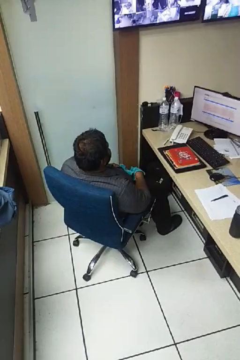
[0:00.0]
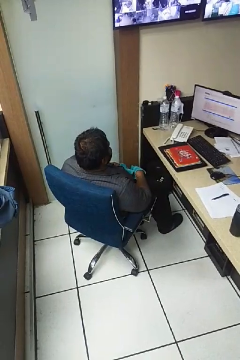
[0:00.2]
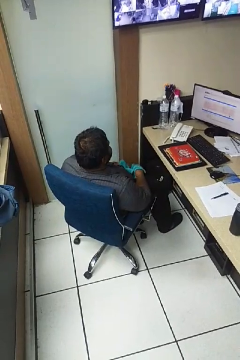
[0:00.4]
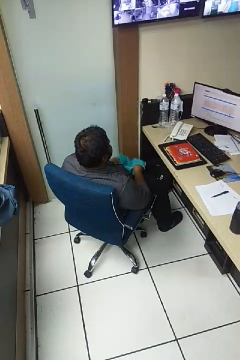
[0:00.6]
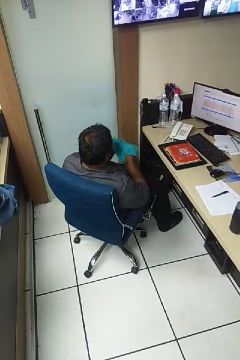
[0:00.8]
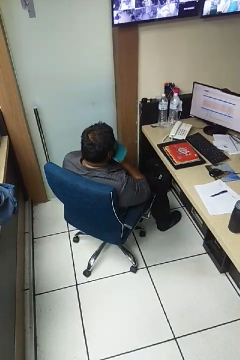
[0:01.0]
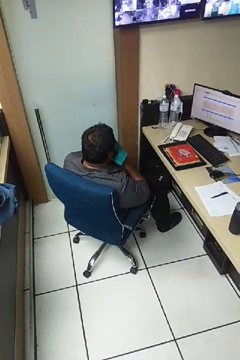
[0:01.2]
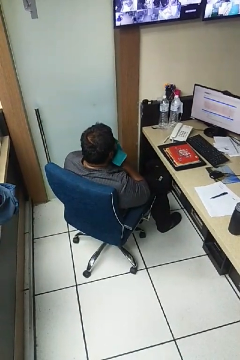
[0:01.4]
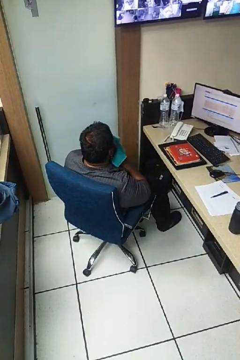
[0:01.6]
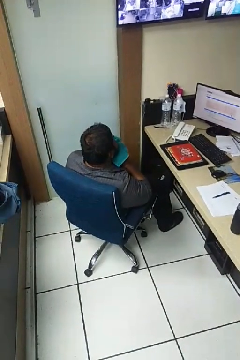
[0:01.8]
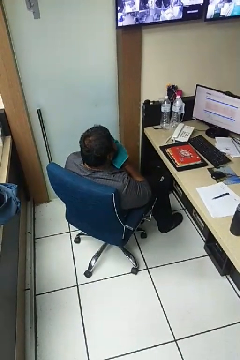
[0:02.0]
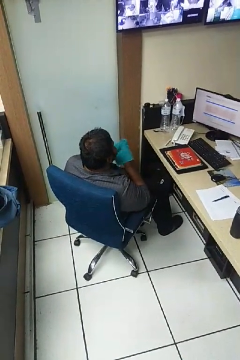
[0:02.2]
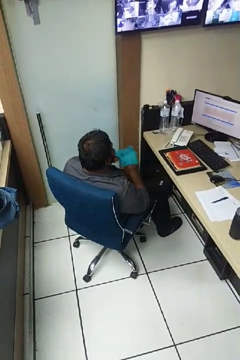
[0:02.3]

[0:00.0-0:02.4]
person wipes mouth with napkin

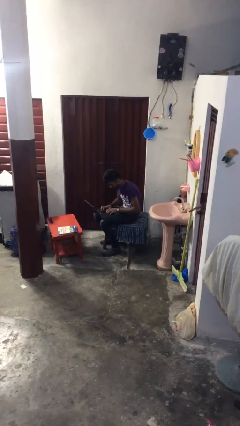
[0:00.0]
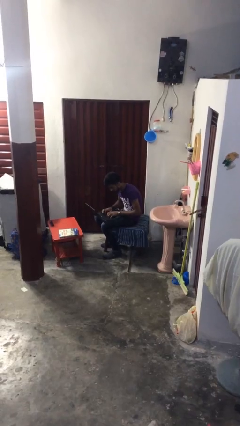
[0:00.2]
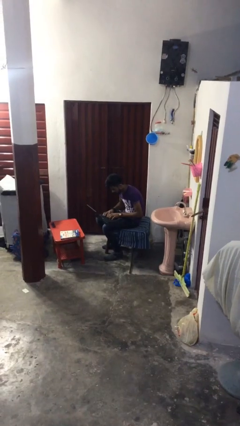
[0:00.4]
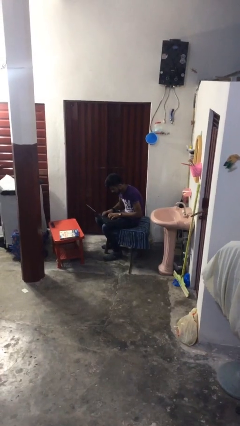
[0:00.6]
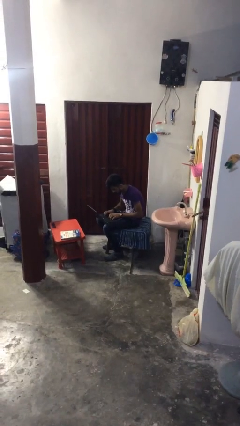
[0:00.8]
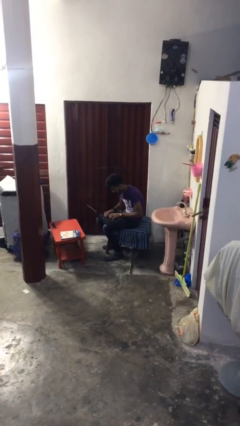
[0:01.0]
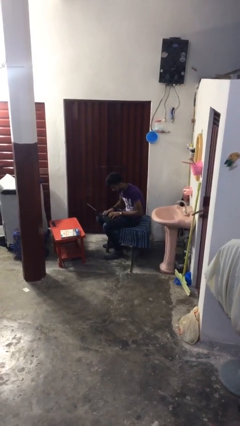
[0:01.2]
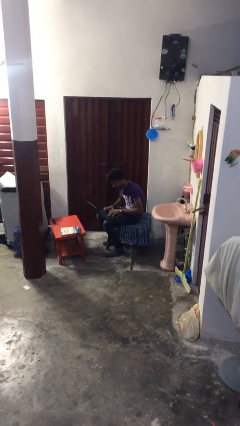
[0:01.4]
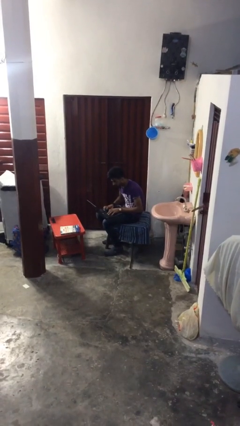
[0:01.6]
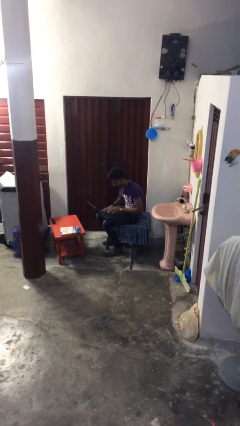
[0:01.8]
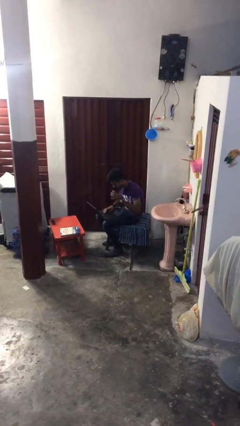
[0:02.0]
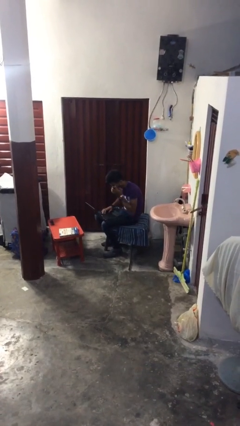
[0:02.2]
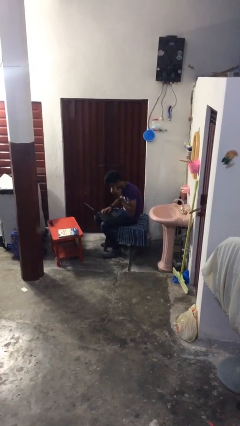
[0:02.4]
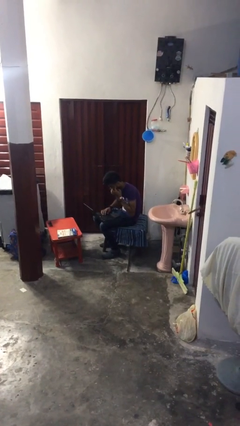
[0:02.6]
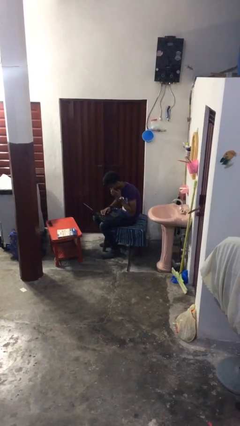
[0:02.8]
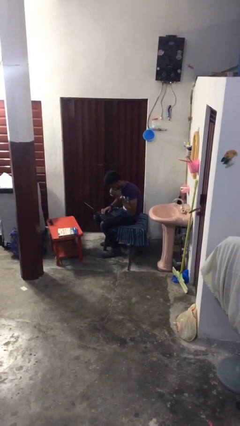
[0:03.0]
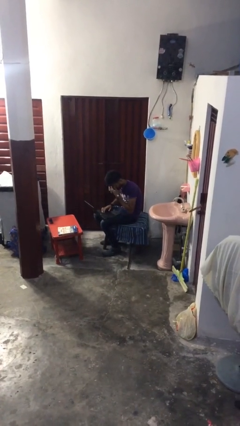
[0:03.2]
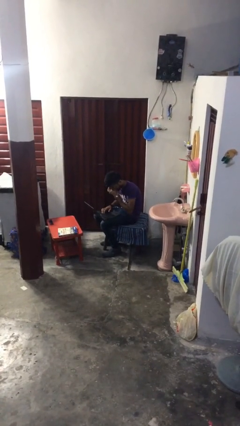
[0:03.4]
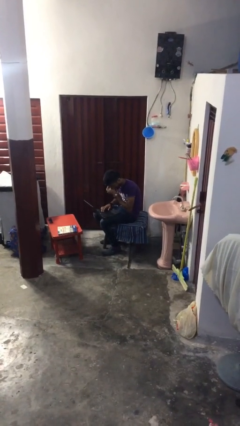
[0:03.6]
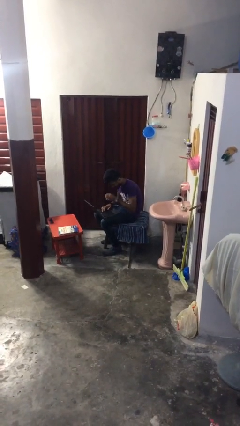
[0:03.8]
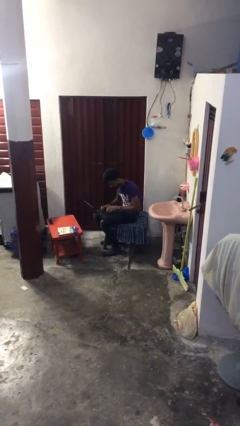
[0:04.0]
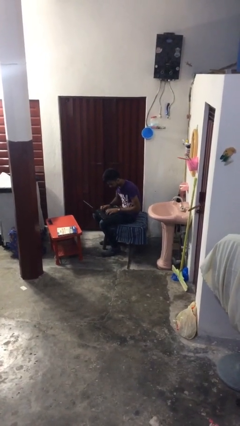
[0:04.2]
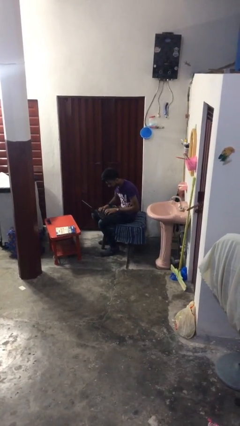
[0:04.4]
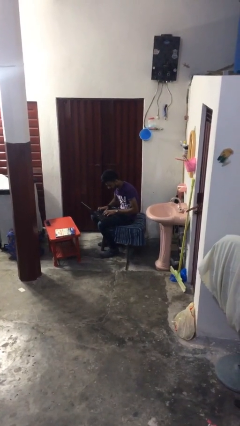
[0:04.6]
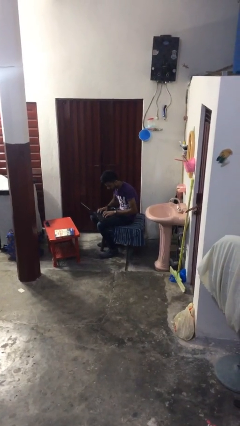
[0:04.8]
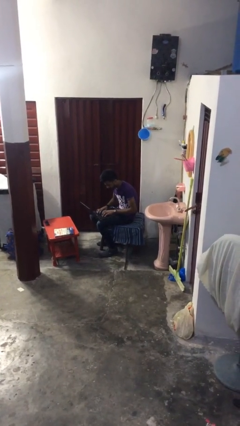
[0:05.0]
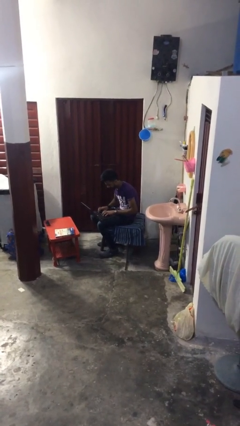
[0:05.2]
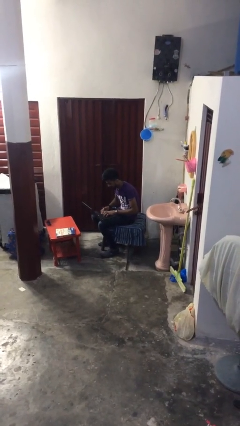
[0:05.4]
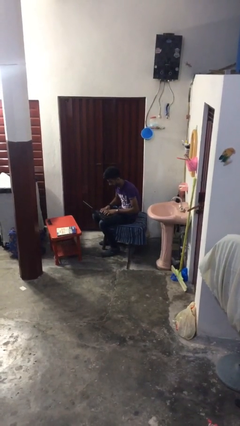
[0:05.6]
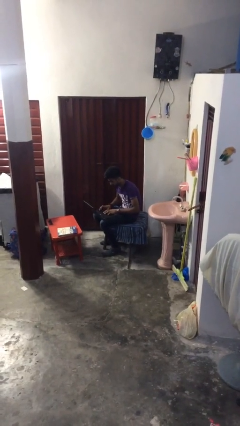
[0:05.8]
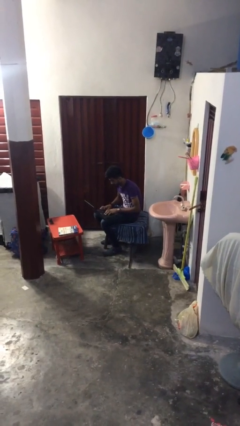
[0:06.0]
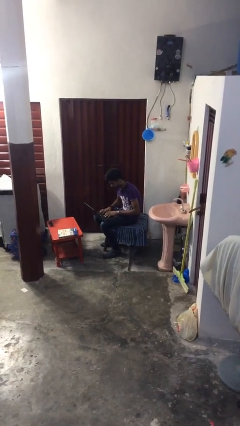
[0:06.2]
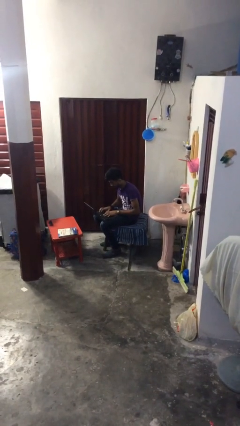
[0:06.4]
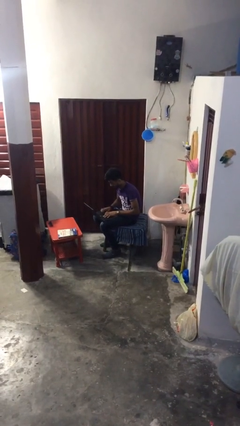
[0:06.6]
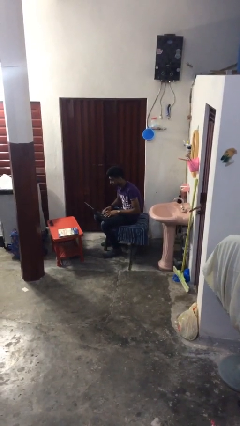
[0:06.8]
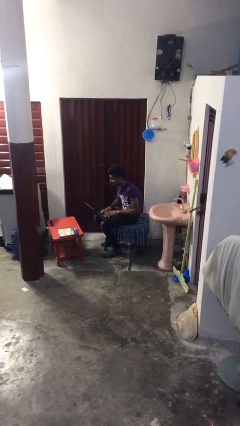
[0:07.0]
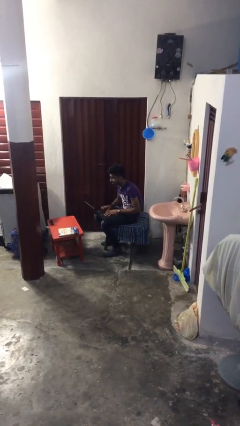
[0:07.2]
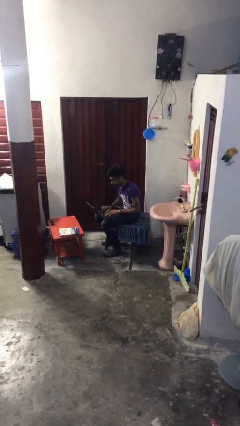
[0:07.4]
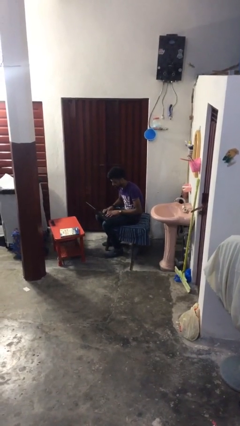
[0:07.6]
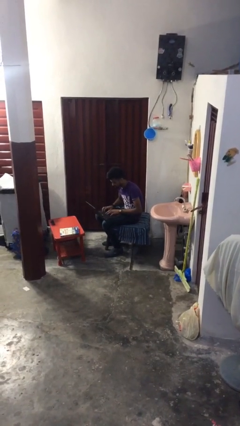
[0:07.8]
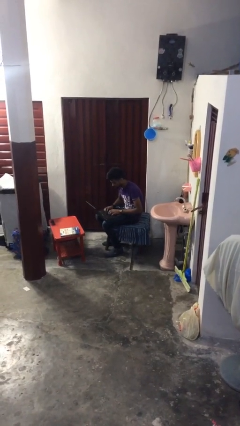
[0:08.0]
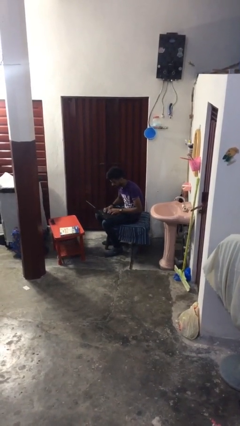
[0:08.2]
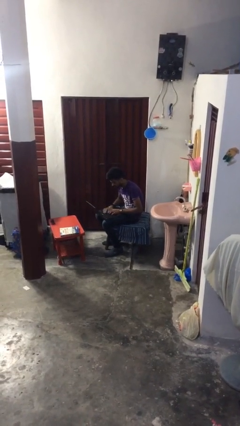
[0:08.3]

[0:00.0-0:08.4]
person interacts with laptop

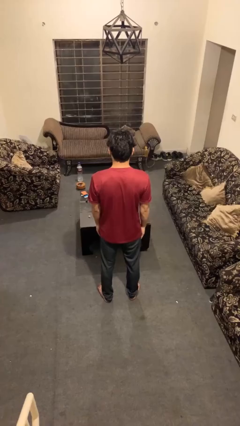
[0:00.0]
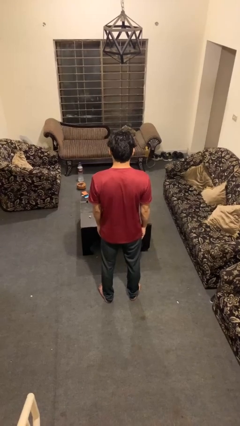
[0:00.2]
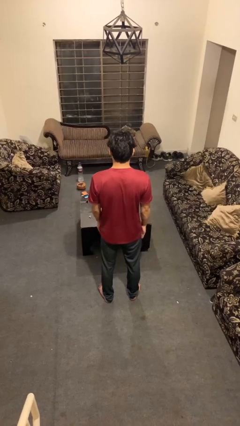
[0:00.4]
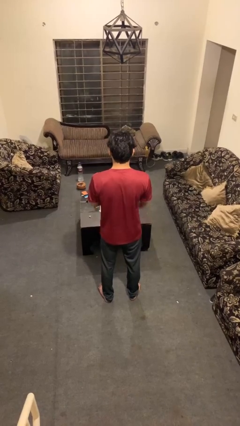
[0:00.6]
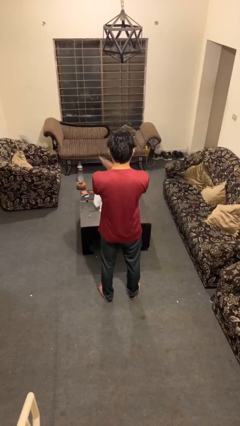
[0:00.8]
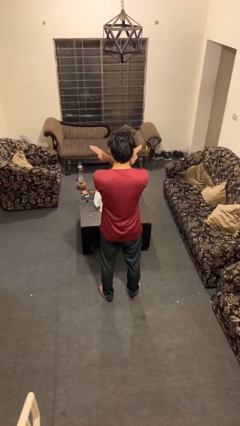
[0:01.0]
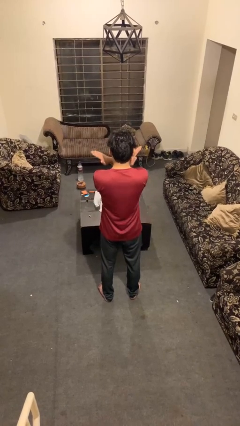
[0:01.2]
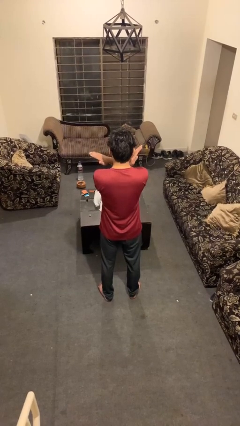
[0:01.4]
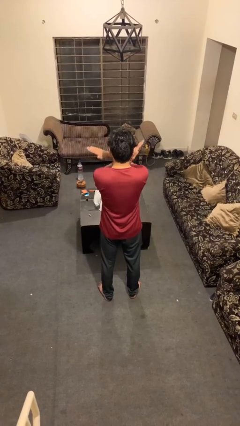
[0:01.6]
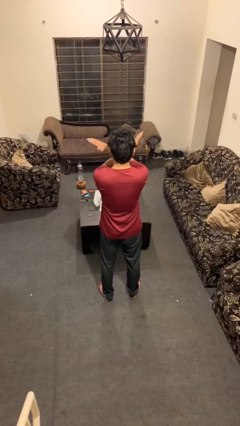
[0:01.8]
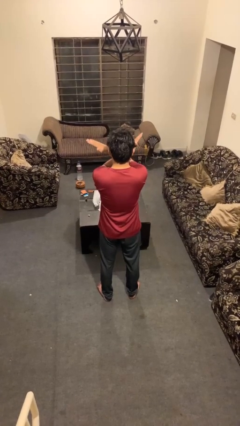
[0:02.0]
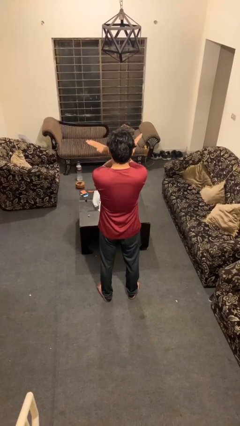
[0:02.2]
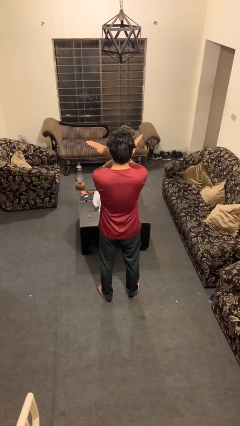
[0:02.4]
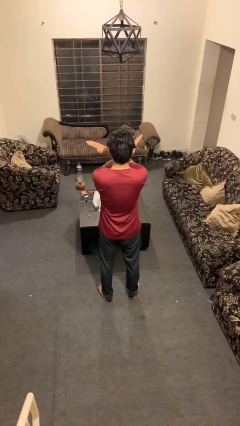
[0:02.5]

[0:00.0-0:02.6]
person gestures arms x

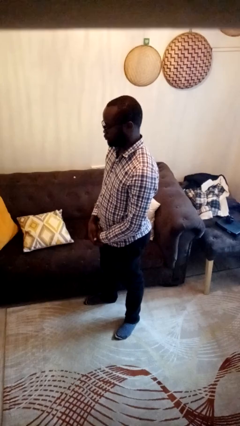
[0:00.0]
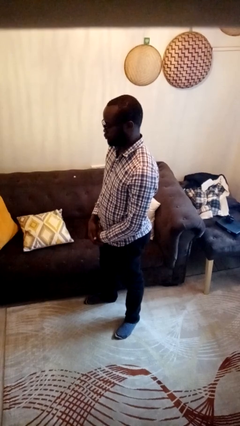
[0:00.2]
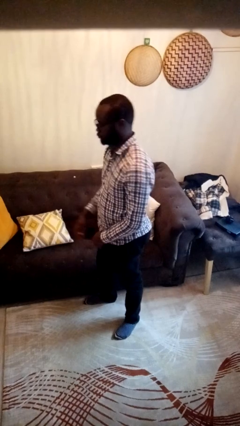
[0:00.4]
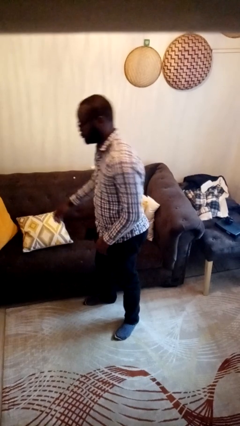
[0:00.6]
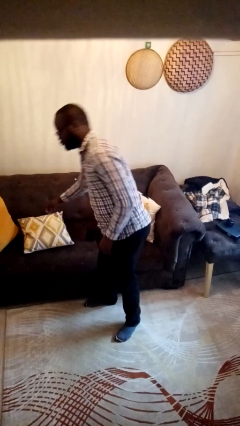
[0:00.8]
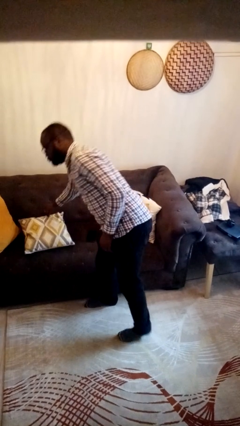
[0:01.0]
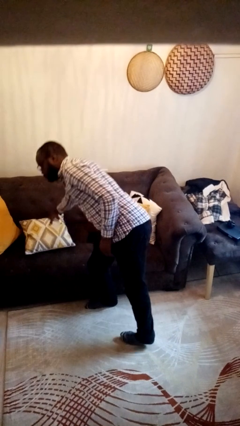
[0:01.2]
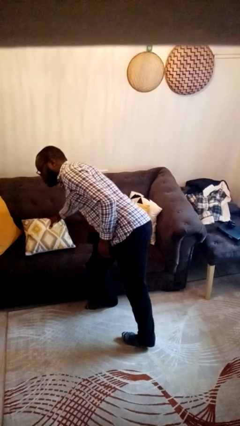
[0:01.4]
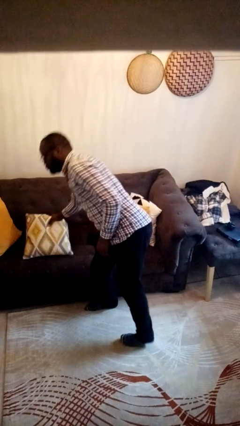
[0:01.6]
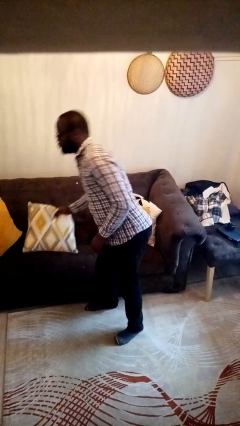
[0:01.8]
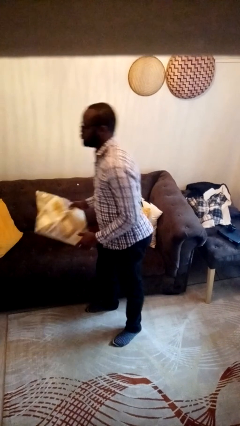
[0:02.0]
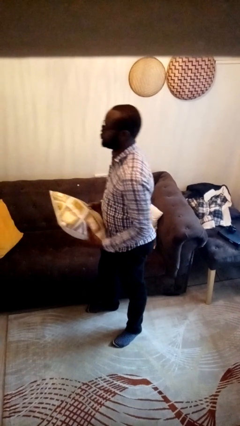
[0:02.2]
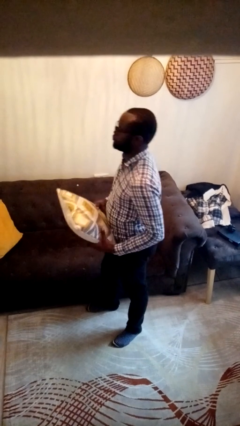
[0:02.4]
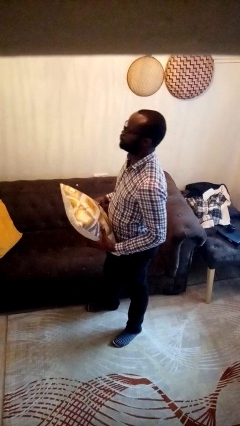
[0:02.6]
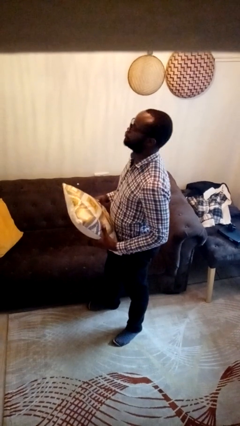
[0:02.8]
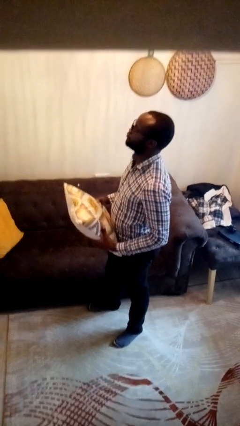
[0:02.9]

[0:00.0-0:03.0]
person picks up object from couch

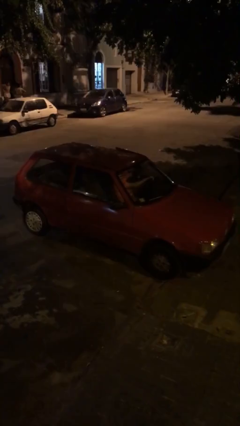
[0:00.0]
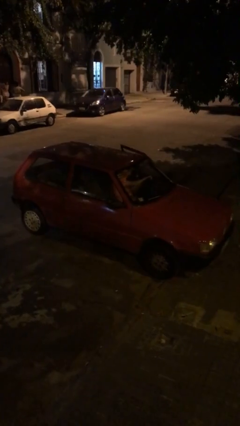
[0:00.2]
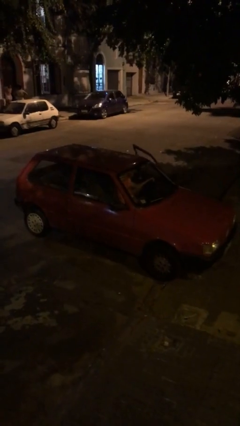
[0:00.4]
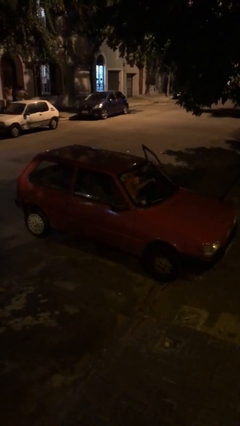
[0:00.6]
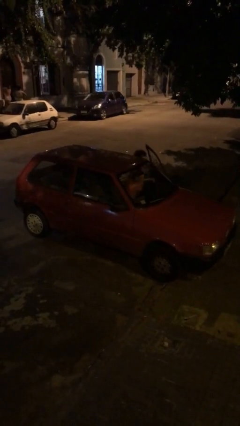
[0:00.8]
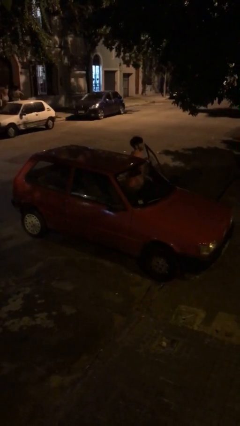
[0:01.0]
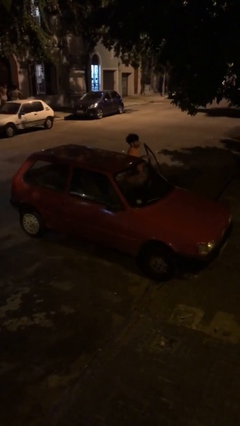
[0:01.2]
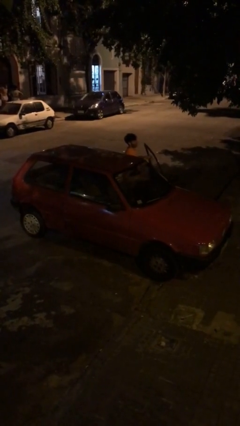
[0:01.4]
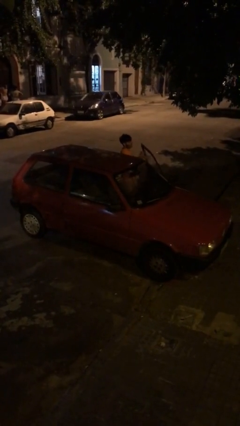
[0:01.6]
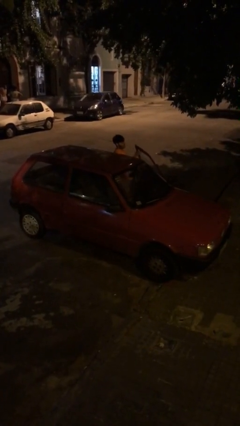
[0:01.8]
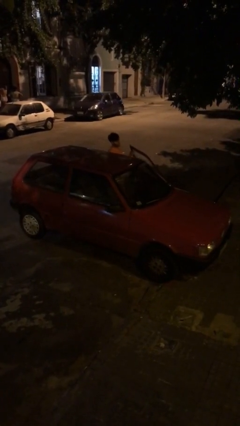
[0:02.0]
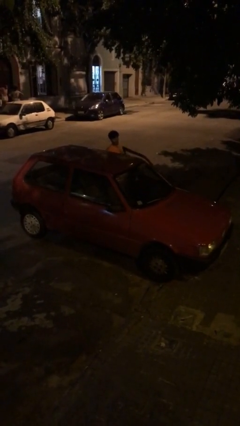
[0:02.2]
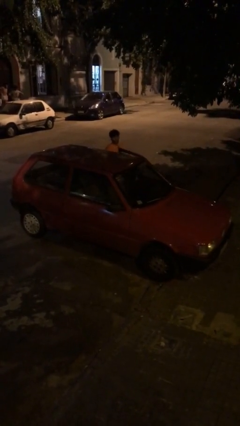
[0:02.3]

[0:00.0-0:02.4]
car drops off person
